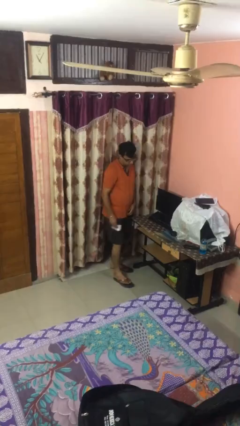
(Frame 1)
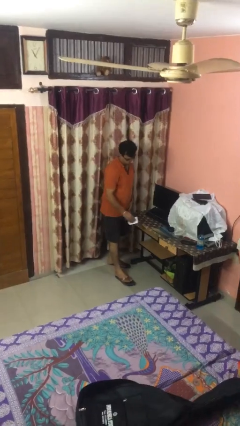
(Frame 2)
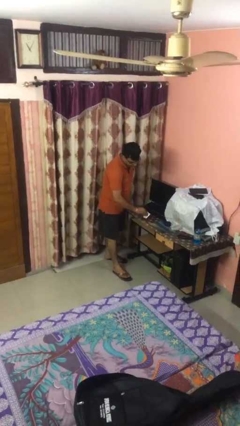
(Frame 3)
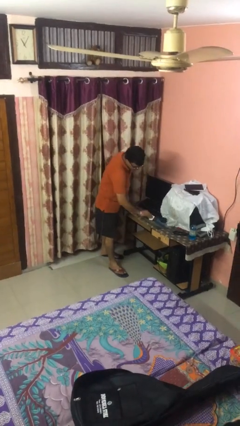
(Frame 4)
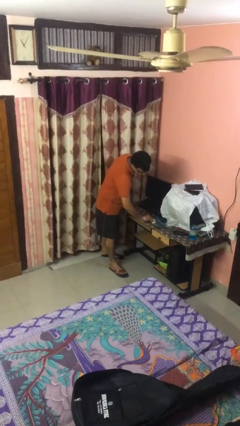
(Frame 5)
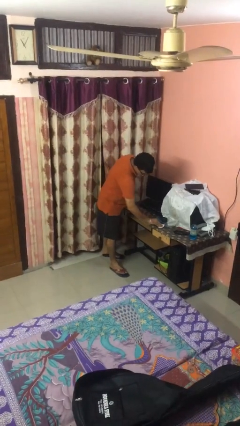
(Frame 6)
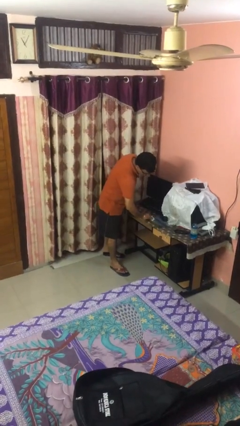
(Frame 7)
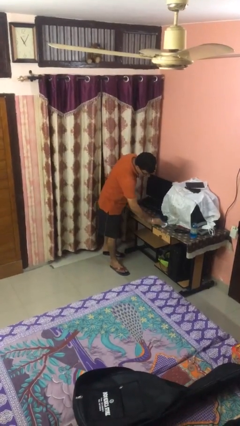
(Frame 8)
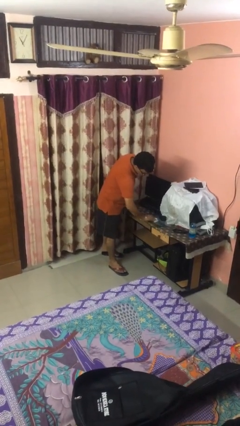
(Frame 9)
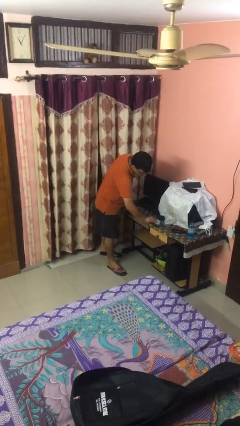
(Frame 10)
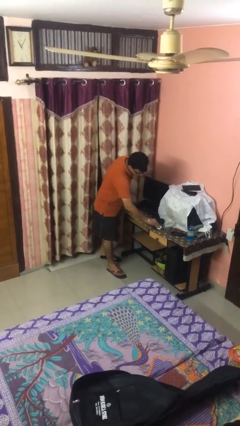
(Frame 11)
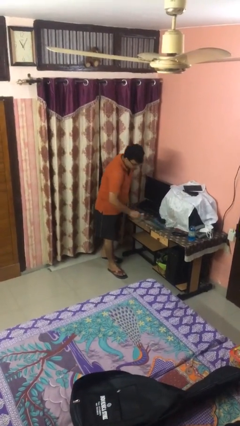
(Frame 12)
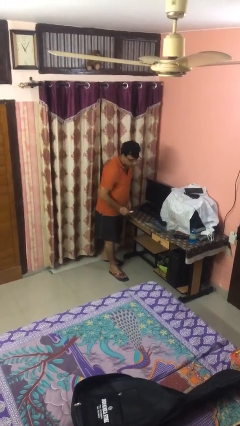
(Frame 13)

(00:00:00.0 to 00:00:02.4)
person cleans table with rag

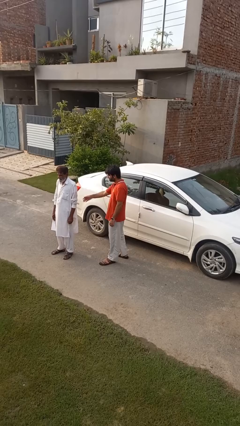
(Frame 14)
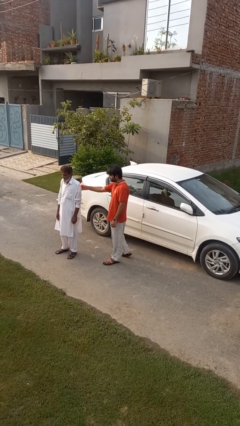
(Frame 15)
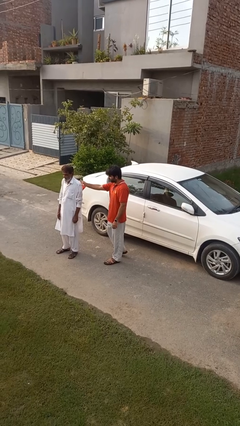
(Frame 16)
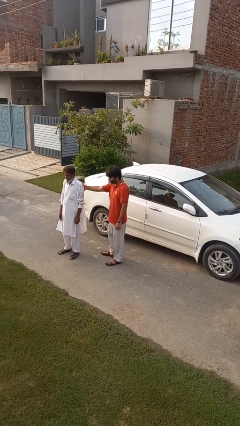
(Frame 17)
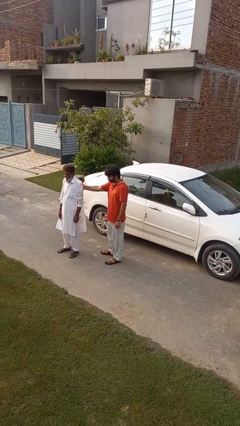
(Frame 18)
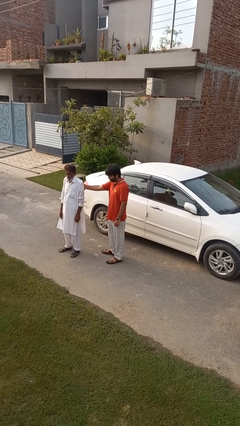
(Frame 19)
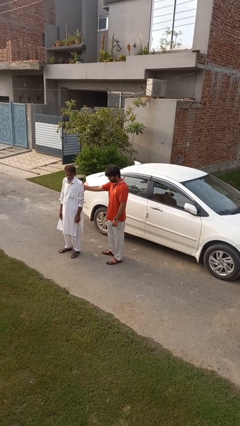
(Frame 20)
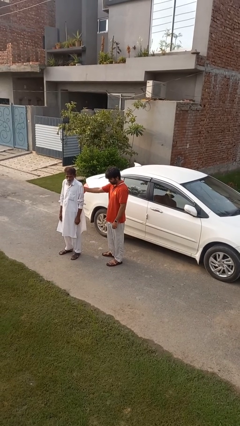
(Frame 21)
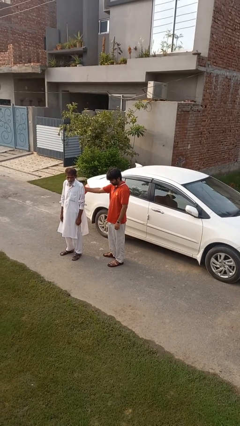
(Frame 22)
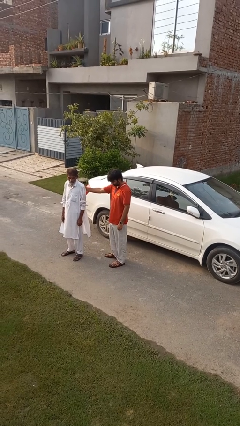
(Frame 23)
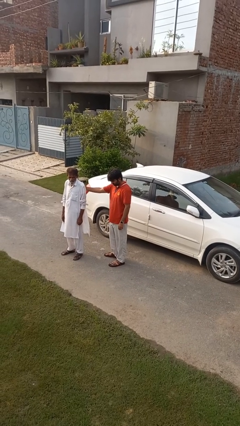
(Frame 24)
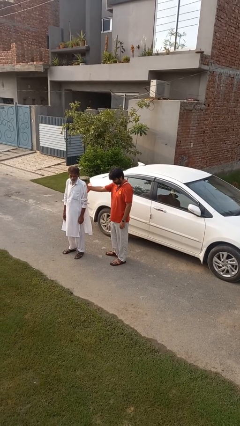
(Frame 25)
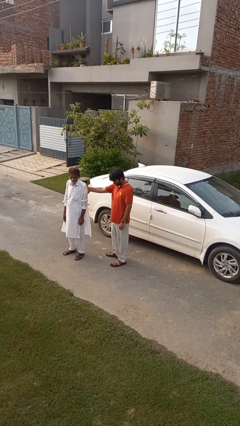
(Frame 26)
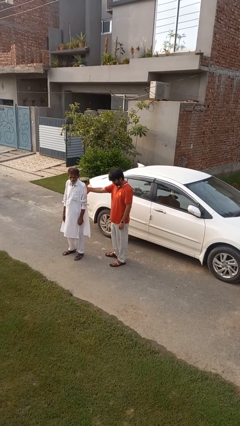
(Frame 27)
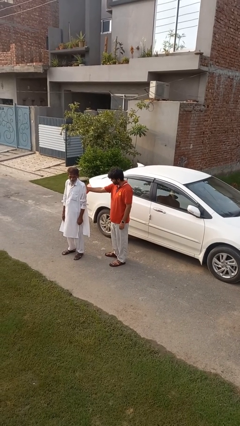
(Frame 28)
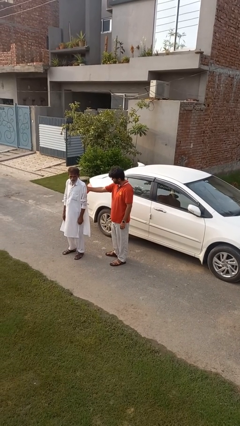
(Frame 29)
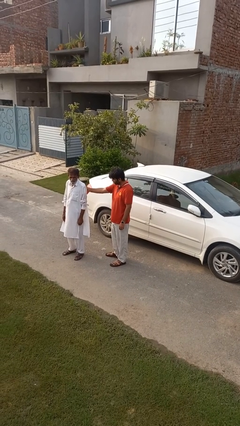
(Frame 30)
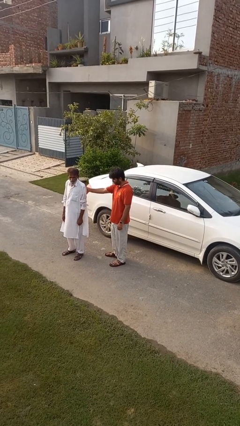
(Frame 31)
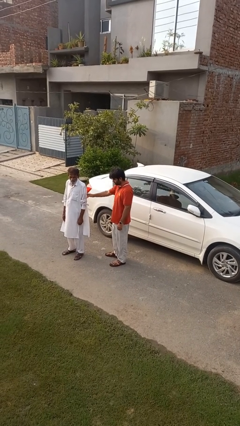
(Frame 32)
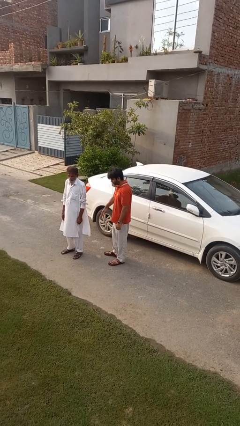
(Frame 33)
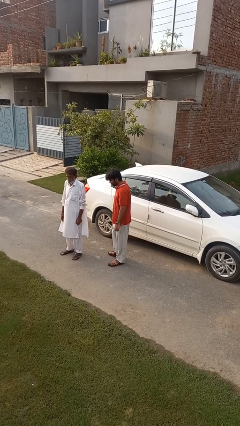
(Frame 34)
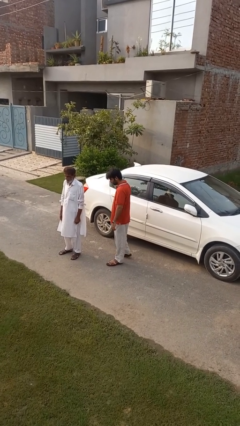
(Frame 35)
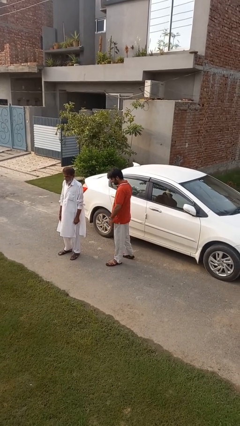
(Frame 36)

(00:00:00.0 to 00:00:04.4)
person touches back of person

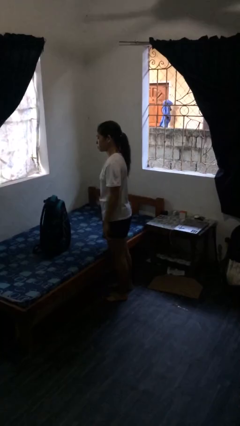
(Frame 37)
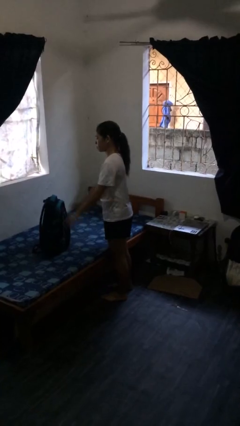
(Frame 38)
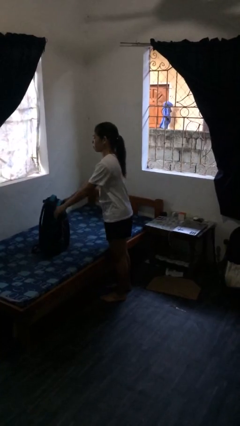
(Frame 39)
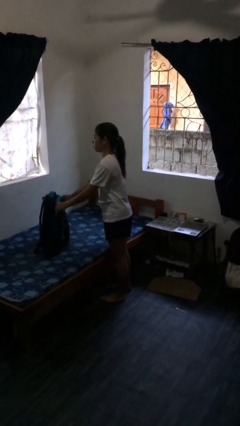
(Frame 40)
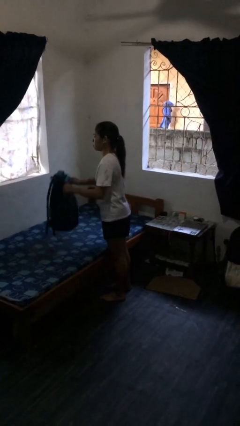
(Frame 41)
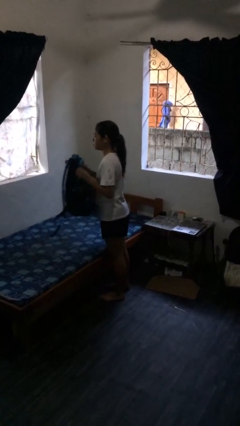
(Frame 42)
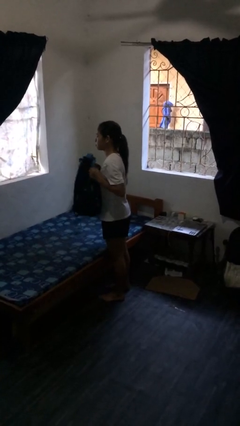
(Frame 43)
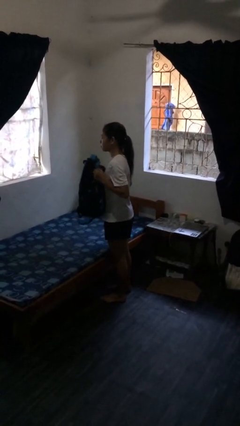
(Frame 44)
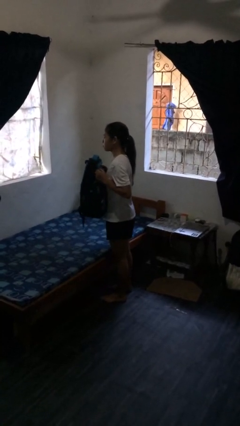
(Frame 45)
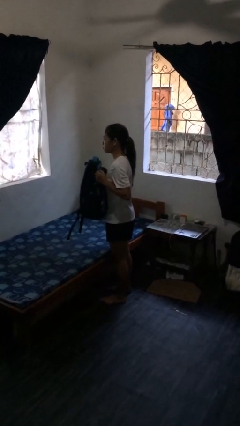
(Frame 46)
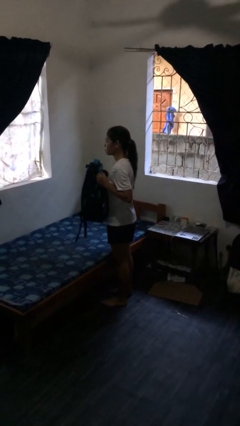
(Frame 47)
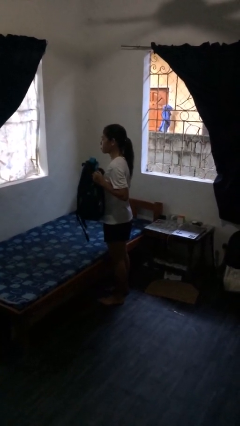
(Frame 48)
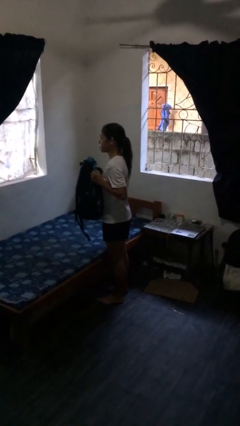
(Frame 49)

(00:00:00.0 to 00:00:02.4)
person picks up object from bed

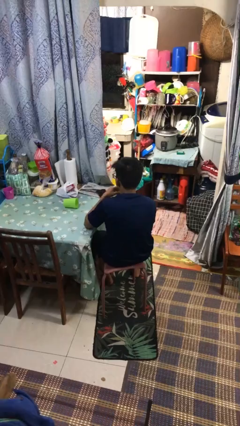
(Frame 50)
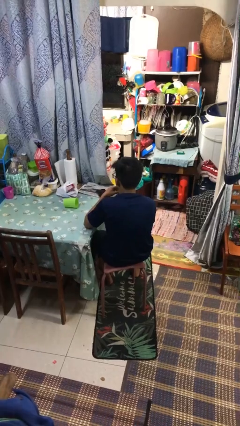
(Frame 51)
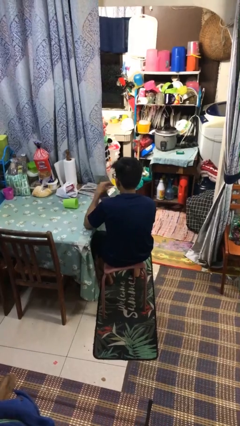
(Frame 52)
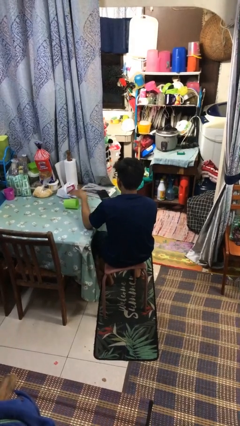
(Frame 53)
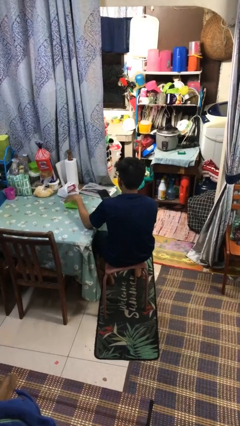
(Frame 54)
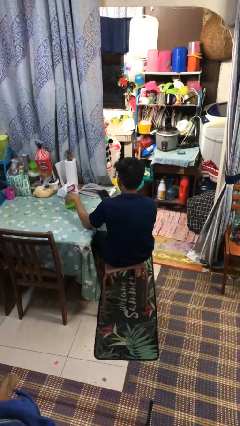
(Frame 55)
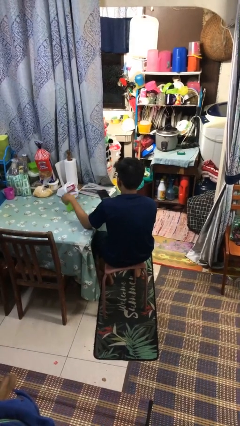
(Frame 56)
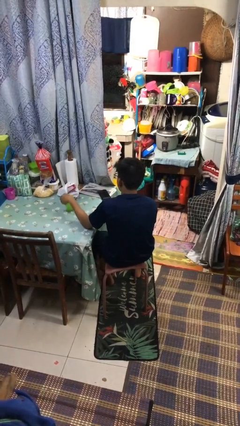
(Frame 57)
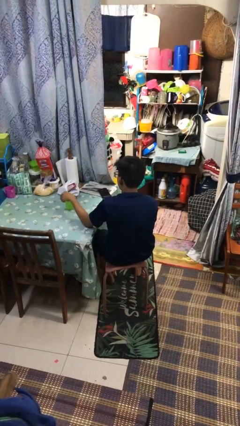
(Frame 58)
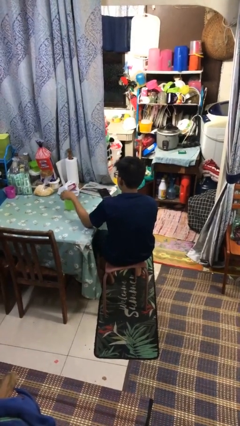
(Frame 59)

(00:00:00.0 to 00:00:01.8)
person sets upright glass

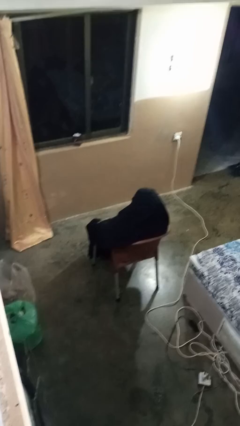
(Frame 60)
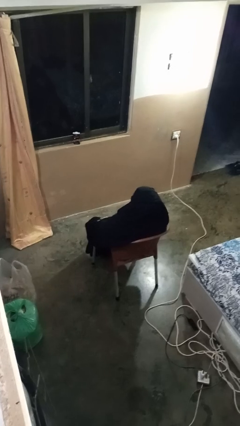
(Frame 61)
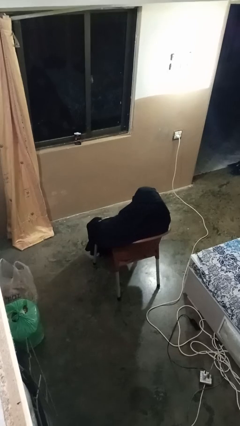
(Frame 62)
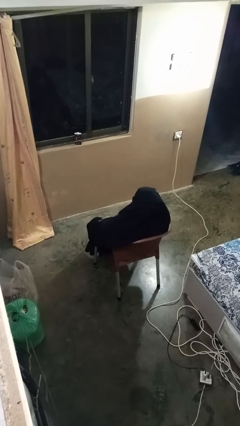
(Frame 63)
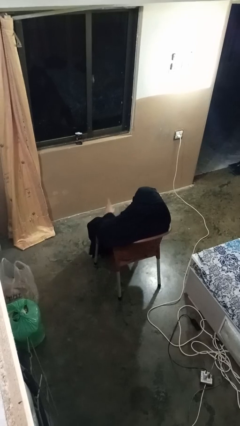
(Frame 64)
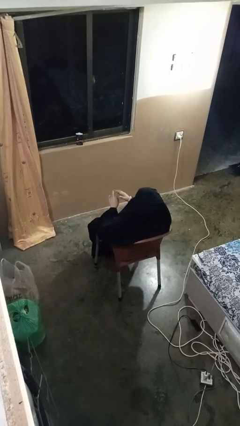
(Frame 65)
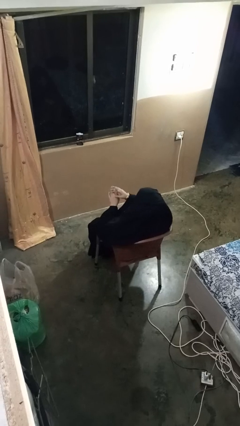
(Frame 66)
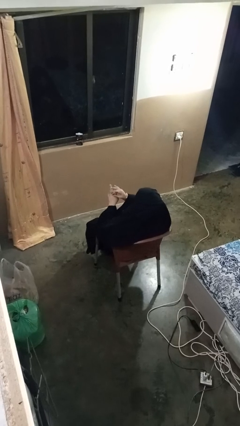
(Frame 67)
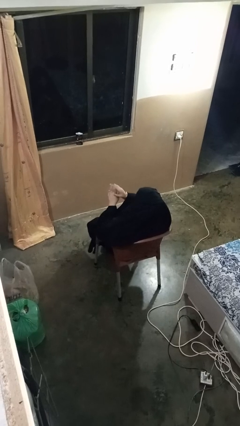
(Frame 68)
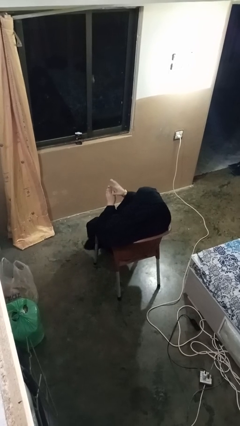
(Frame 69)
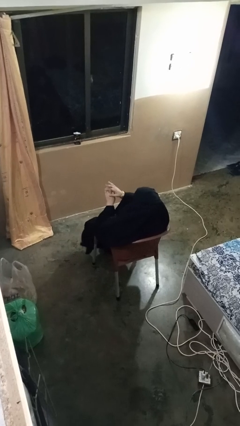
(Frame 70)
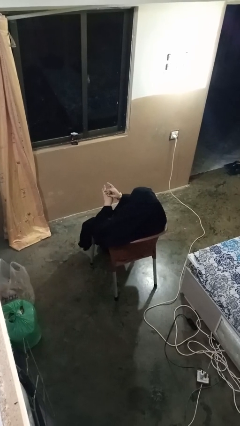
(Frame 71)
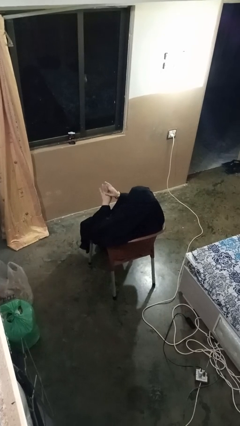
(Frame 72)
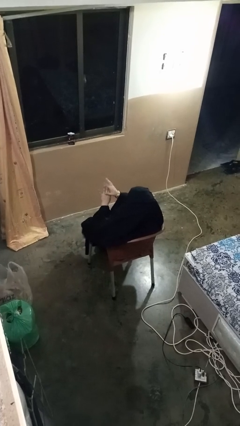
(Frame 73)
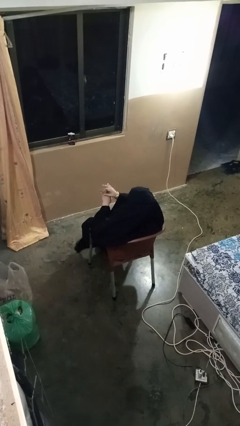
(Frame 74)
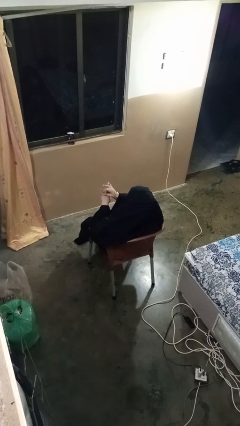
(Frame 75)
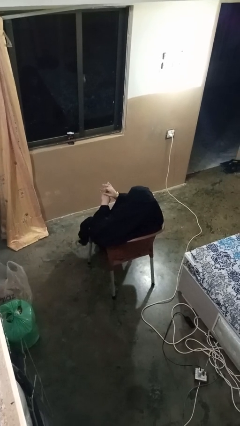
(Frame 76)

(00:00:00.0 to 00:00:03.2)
person cracks knuckles

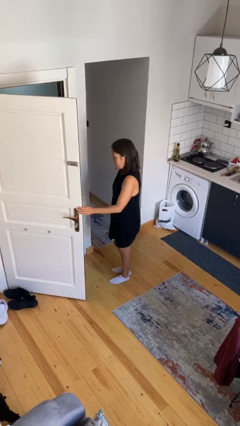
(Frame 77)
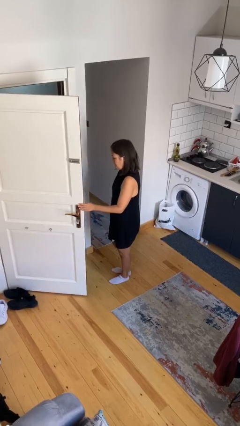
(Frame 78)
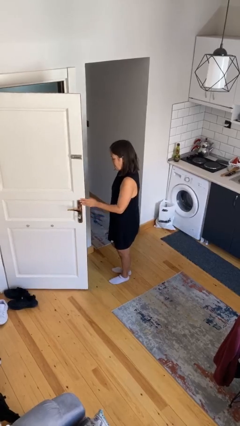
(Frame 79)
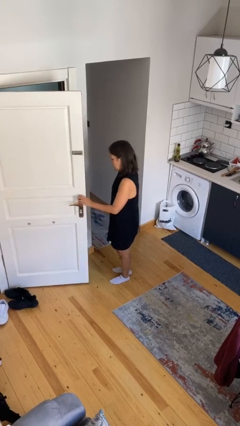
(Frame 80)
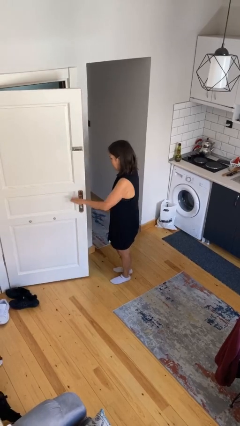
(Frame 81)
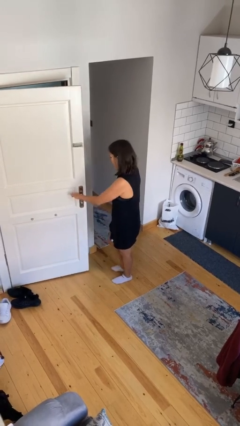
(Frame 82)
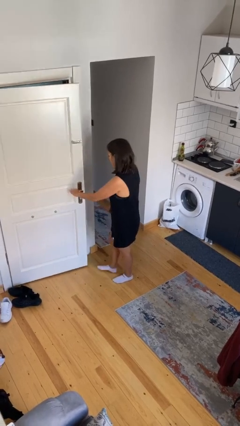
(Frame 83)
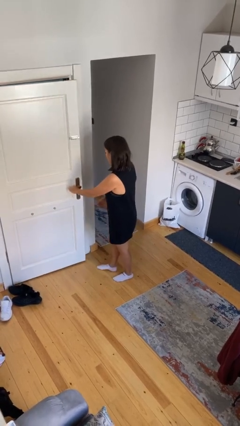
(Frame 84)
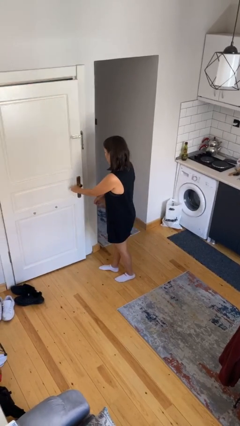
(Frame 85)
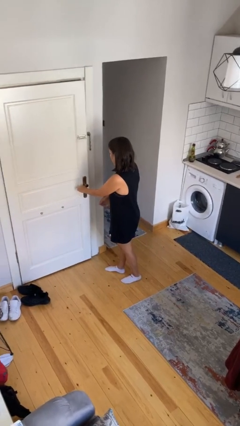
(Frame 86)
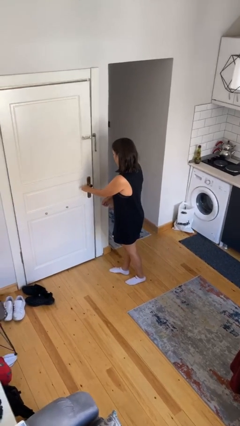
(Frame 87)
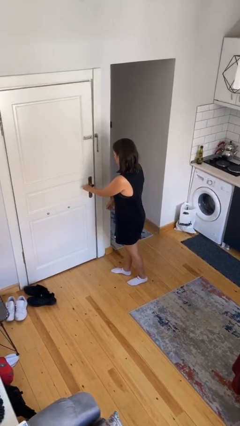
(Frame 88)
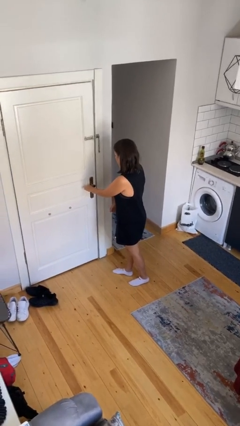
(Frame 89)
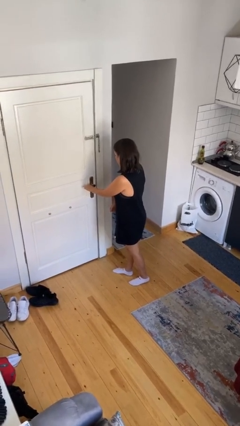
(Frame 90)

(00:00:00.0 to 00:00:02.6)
person closes facility door

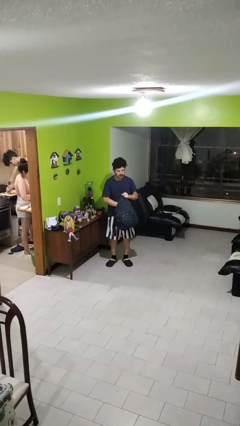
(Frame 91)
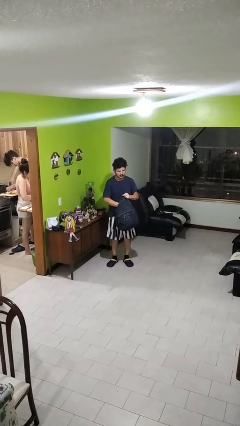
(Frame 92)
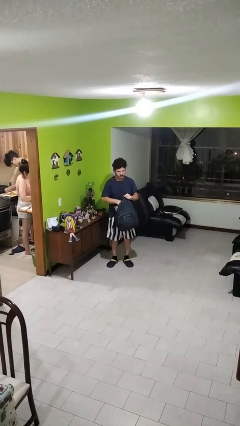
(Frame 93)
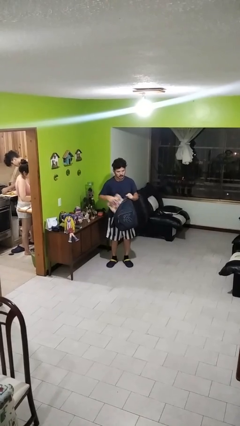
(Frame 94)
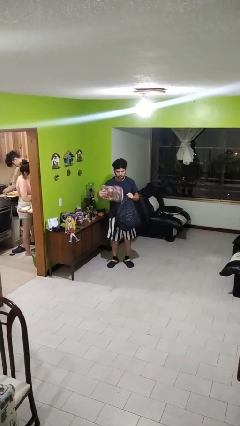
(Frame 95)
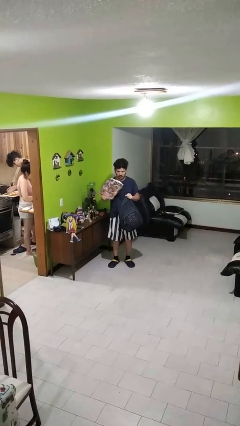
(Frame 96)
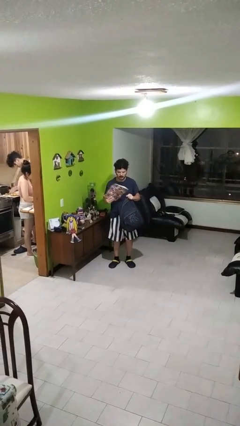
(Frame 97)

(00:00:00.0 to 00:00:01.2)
person takes object from purse
